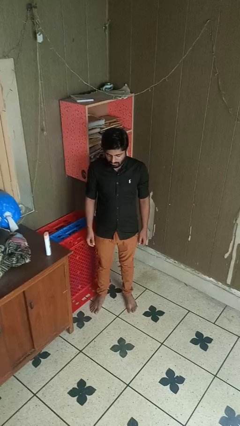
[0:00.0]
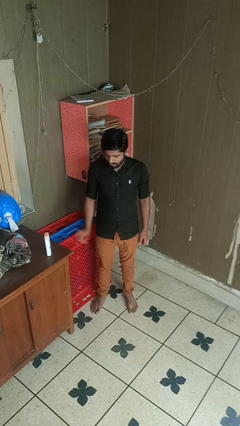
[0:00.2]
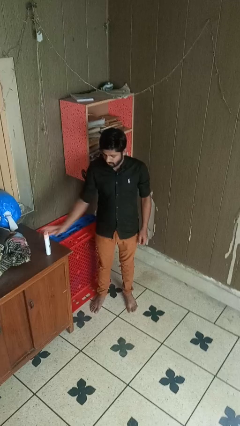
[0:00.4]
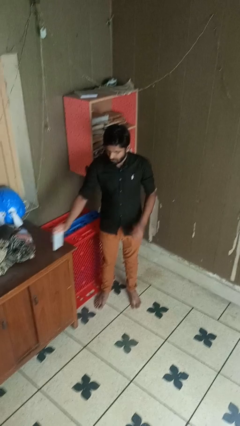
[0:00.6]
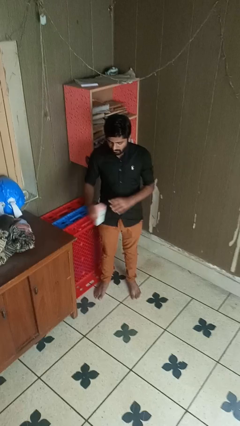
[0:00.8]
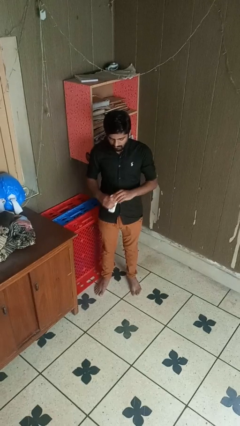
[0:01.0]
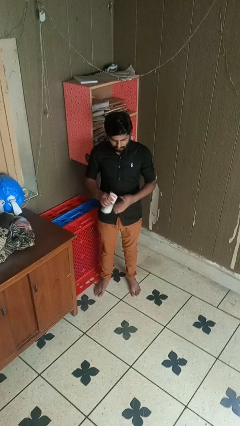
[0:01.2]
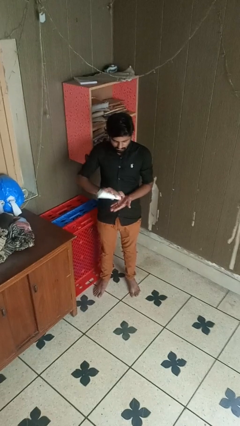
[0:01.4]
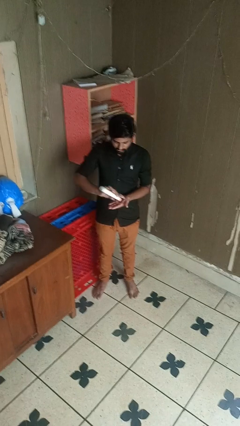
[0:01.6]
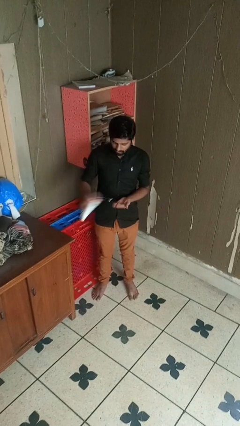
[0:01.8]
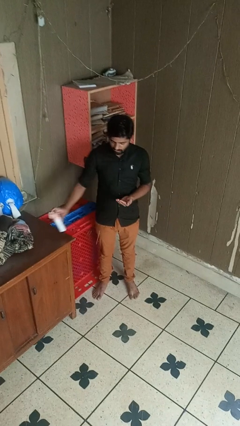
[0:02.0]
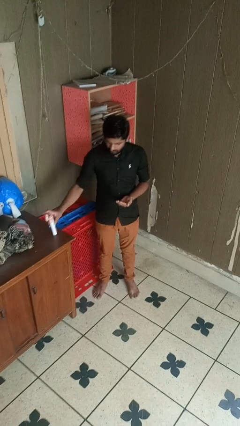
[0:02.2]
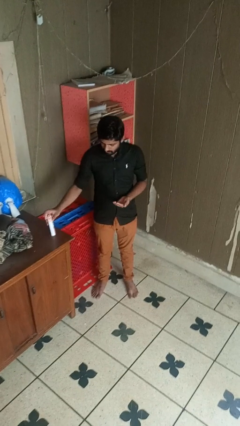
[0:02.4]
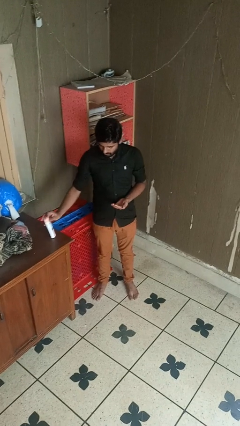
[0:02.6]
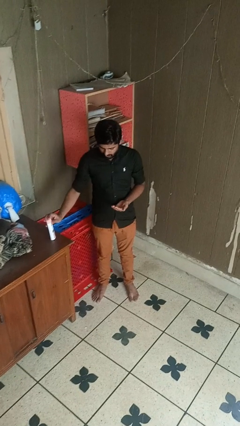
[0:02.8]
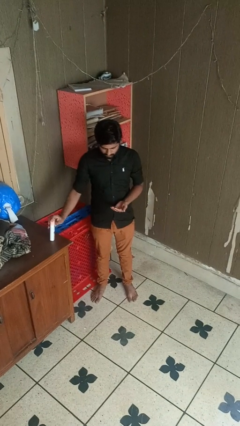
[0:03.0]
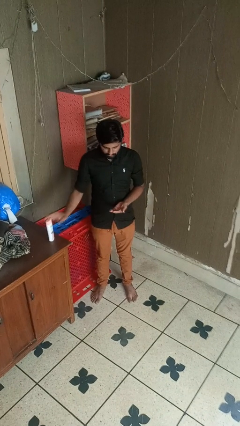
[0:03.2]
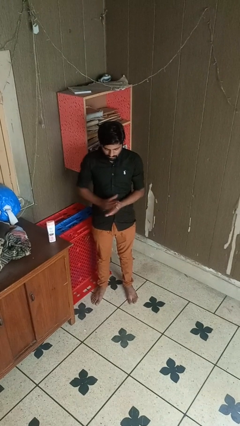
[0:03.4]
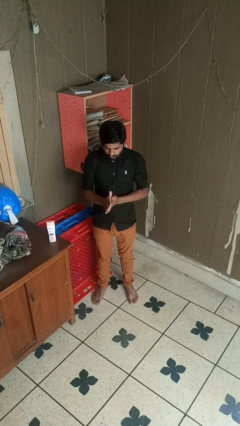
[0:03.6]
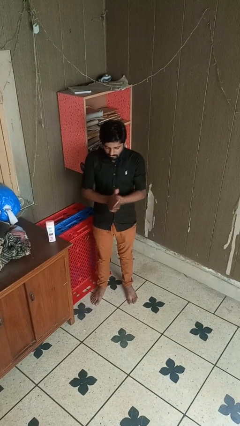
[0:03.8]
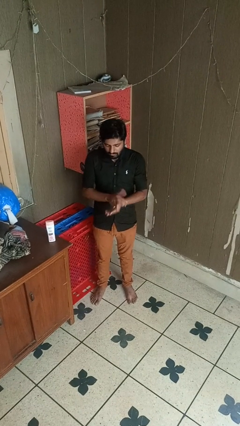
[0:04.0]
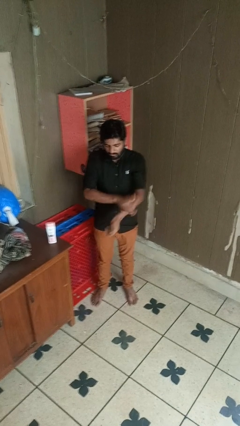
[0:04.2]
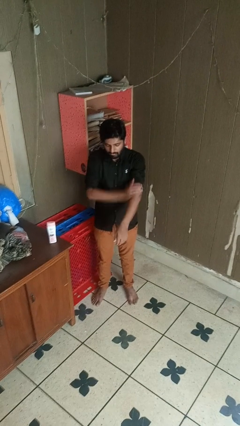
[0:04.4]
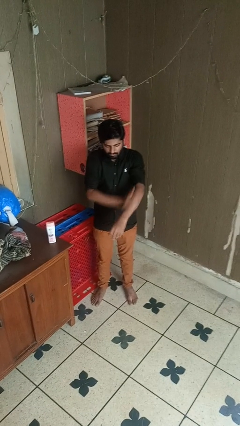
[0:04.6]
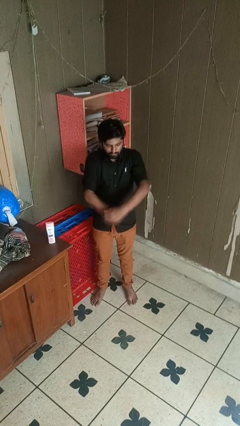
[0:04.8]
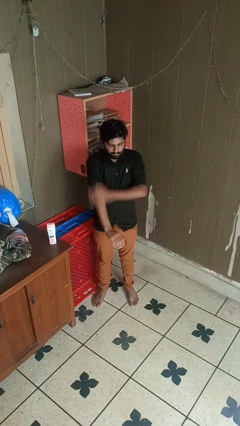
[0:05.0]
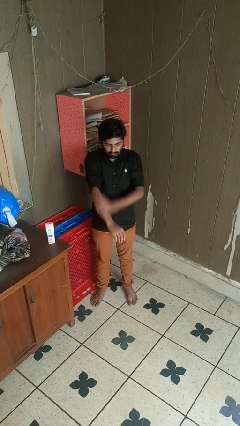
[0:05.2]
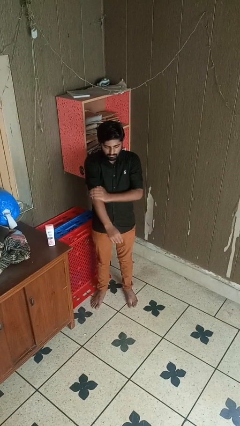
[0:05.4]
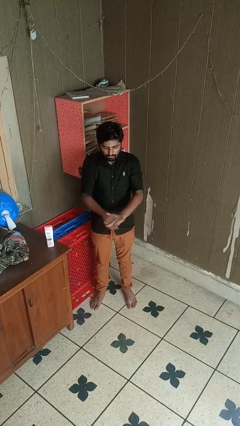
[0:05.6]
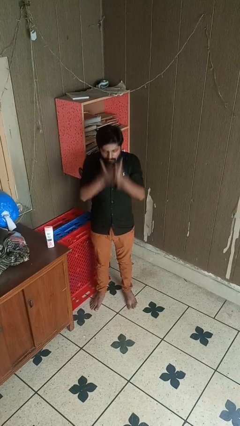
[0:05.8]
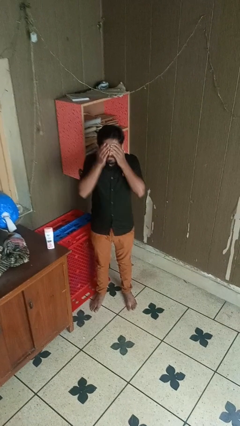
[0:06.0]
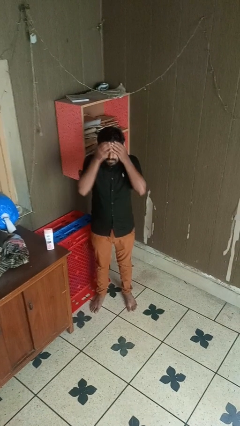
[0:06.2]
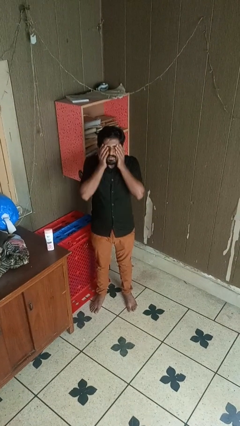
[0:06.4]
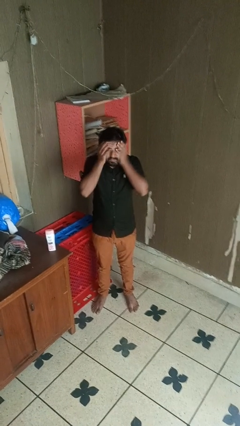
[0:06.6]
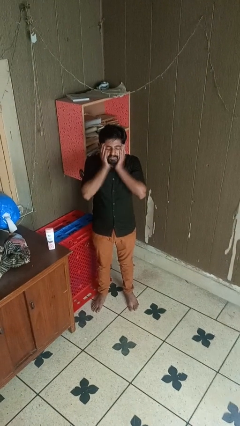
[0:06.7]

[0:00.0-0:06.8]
person applies facial moisturizer

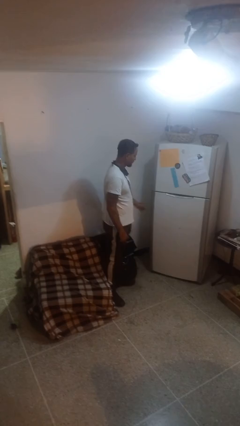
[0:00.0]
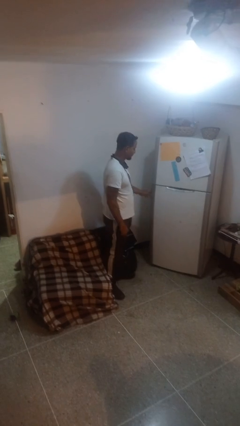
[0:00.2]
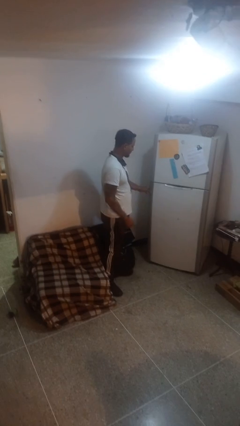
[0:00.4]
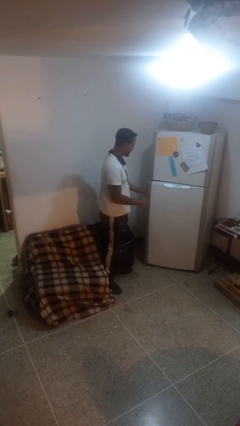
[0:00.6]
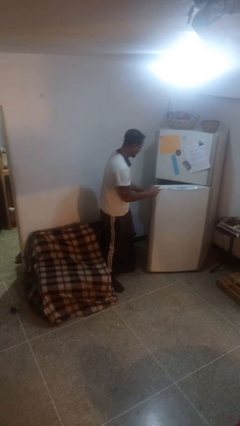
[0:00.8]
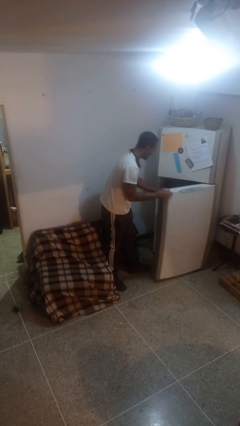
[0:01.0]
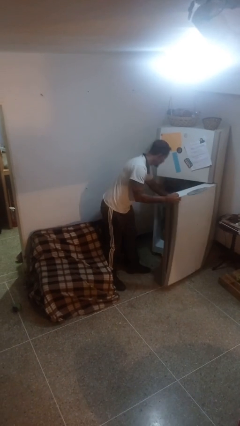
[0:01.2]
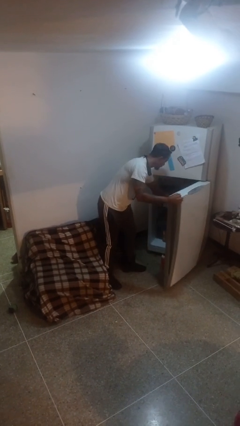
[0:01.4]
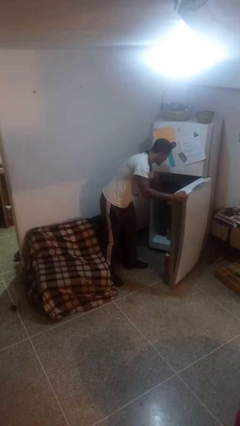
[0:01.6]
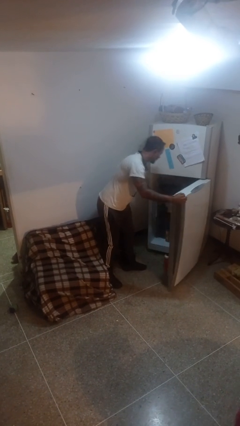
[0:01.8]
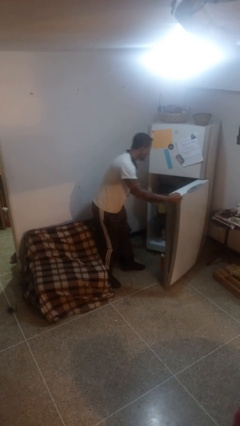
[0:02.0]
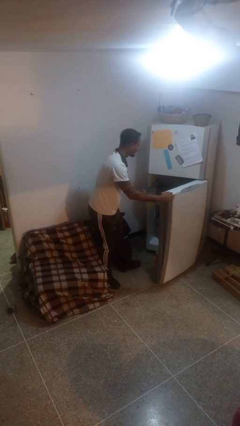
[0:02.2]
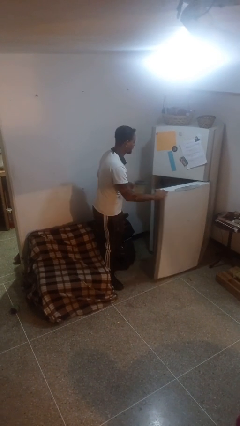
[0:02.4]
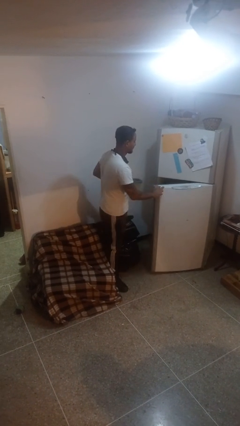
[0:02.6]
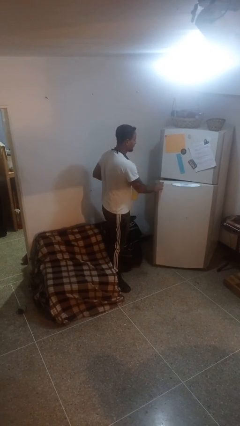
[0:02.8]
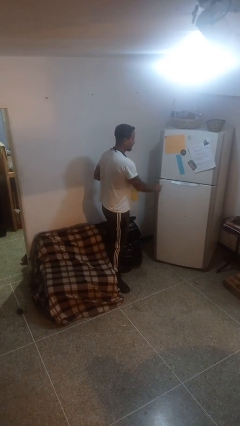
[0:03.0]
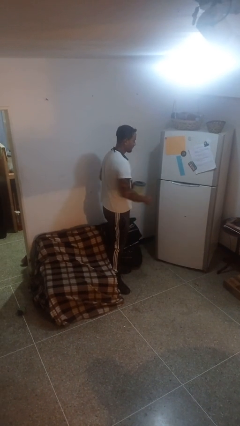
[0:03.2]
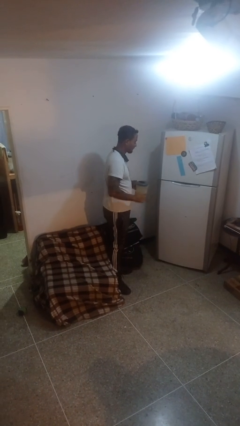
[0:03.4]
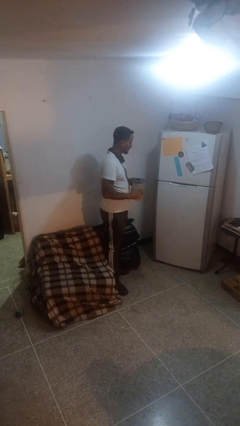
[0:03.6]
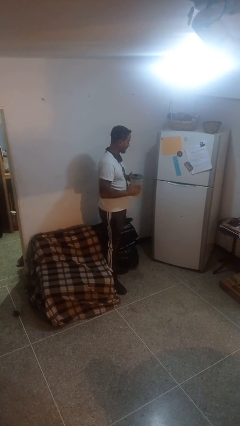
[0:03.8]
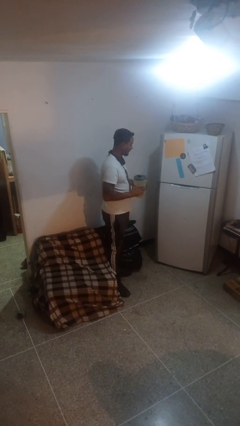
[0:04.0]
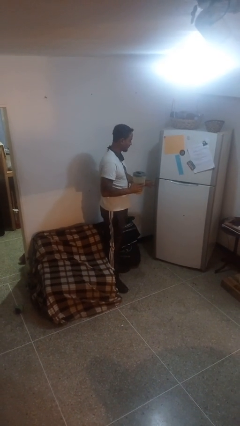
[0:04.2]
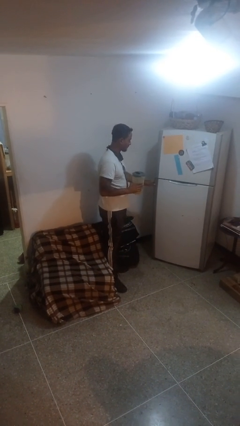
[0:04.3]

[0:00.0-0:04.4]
person takes object from refrigerator

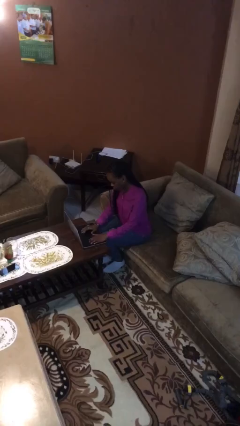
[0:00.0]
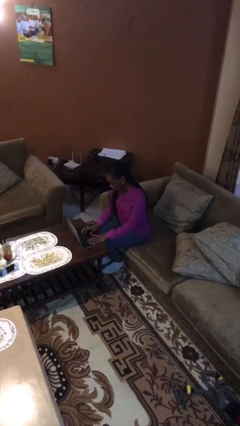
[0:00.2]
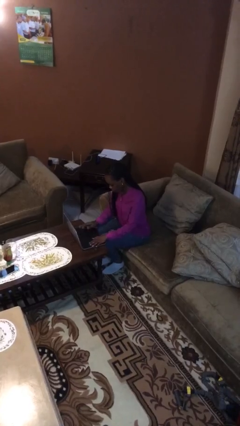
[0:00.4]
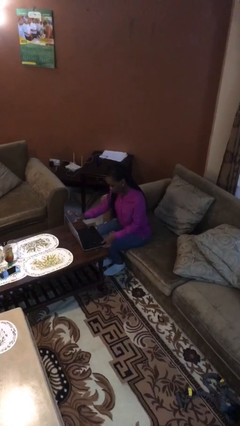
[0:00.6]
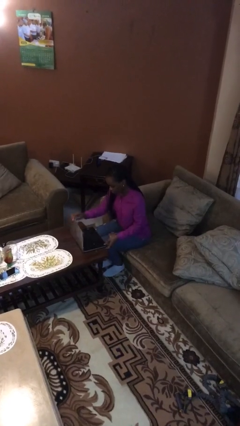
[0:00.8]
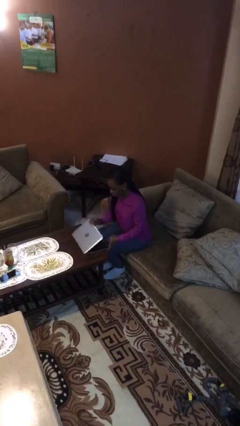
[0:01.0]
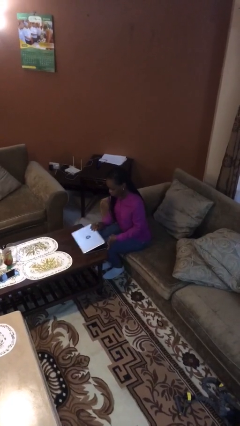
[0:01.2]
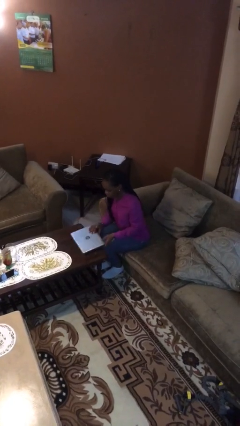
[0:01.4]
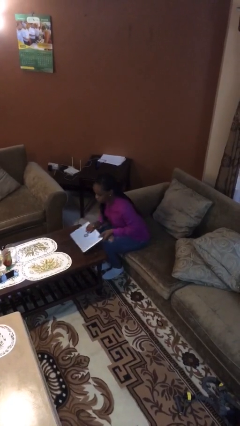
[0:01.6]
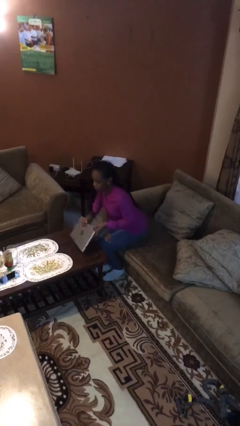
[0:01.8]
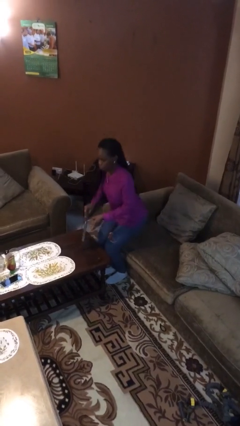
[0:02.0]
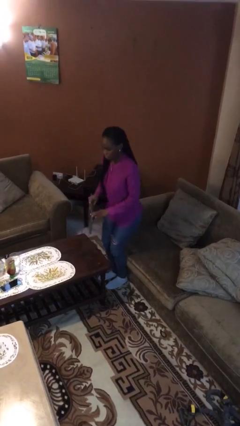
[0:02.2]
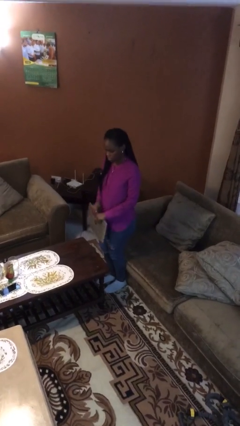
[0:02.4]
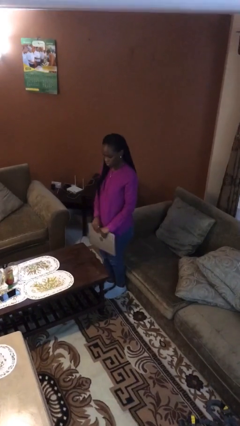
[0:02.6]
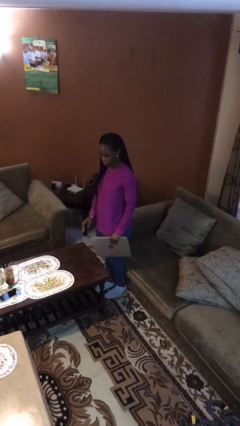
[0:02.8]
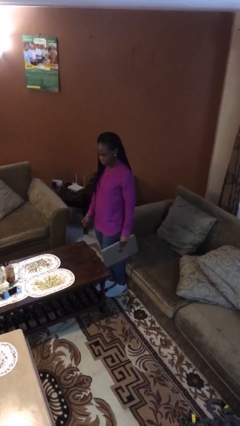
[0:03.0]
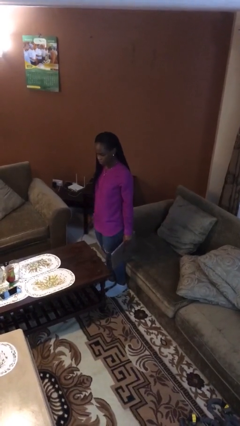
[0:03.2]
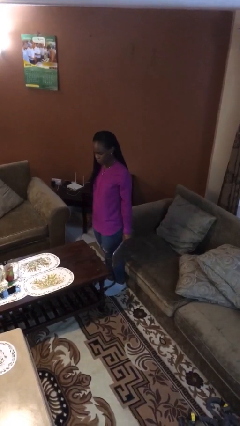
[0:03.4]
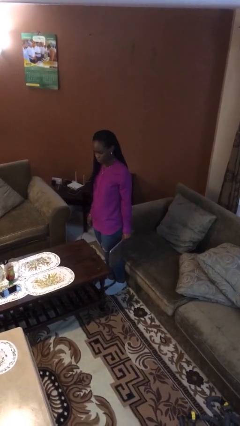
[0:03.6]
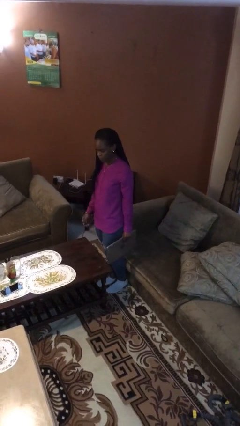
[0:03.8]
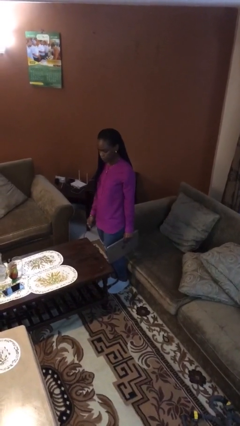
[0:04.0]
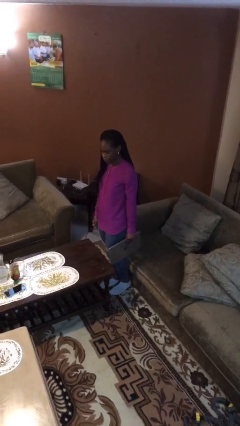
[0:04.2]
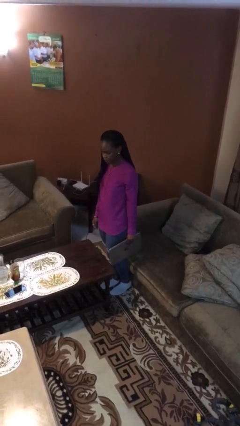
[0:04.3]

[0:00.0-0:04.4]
person stands up

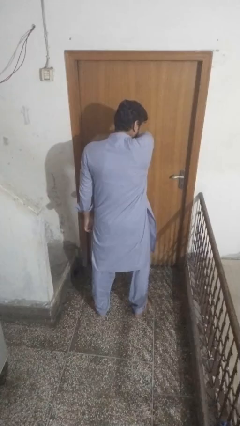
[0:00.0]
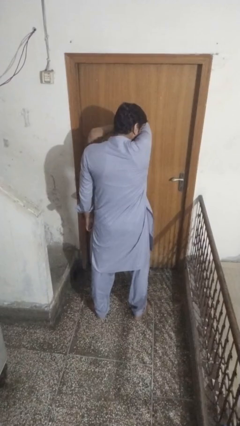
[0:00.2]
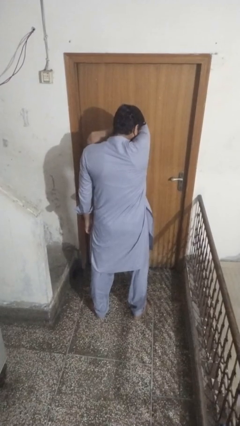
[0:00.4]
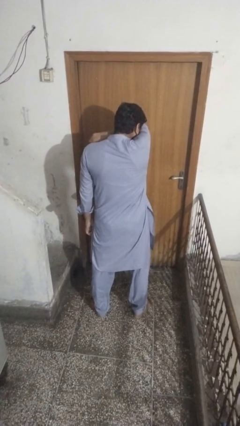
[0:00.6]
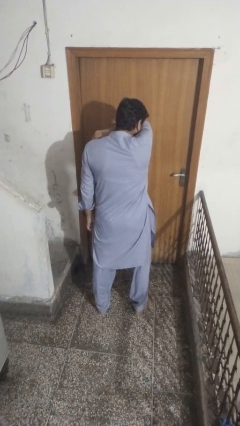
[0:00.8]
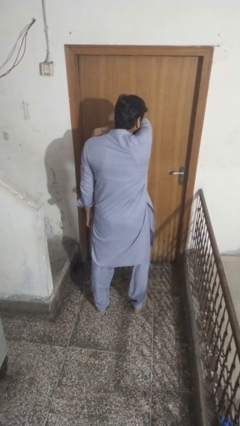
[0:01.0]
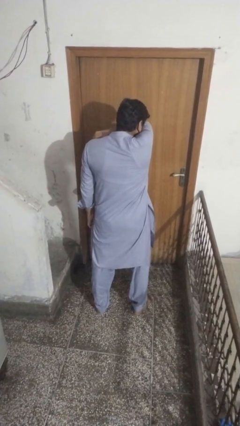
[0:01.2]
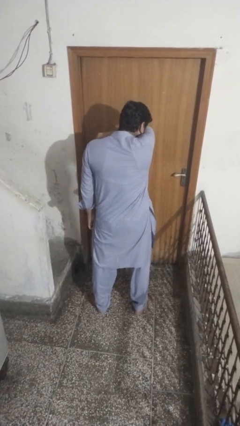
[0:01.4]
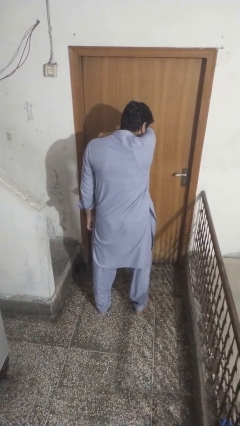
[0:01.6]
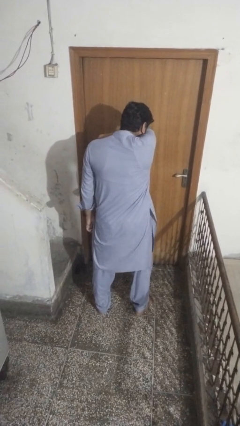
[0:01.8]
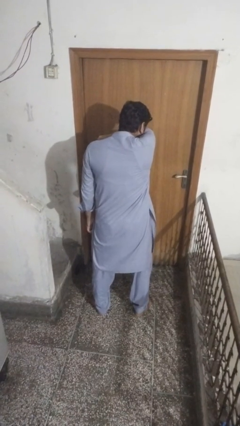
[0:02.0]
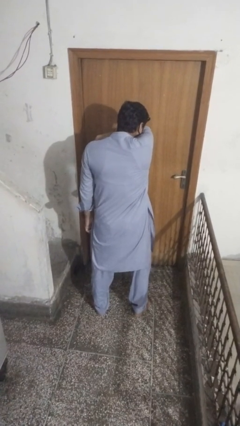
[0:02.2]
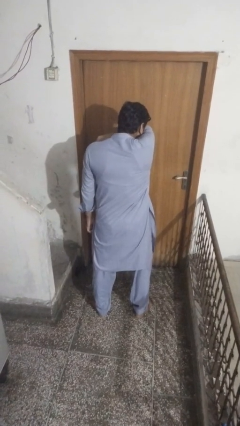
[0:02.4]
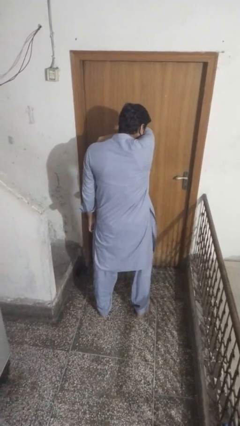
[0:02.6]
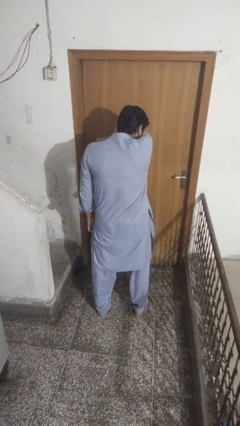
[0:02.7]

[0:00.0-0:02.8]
person sneezes into arm
